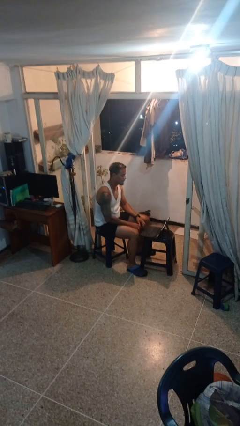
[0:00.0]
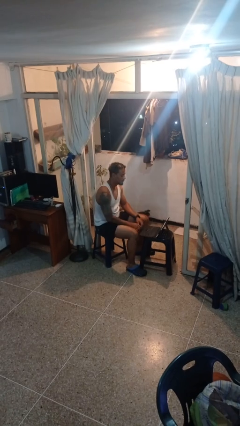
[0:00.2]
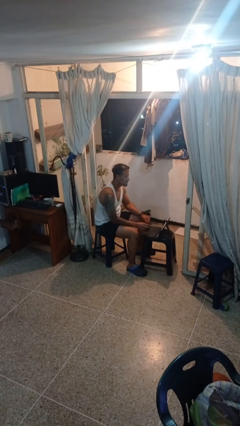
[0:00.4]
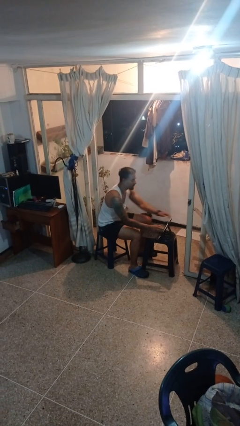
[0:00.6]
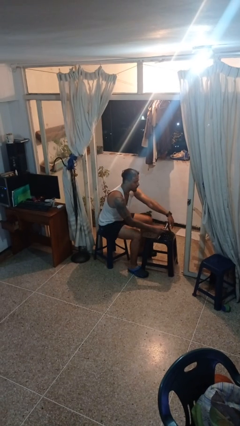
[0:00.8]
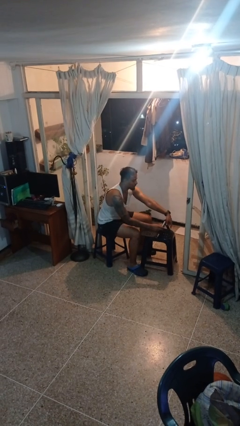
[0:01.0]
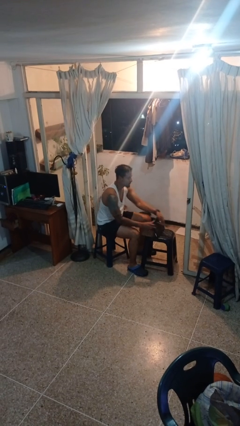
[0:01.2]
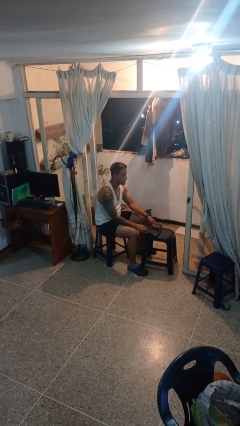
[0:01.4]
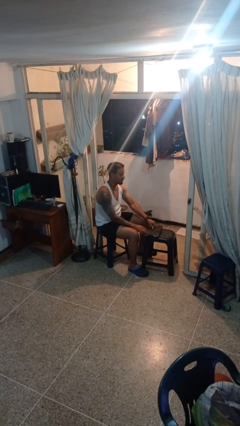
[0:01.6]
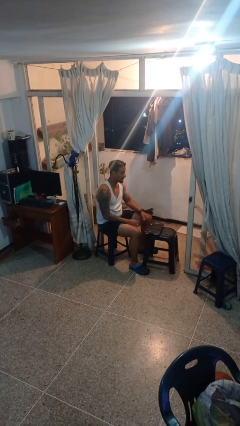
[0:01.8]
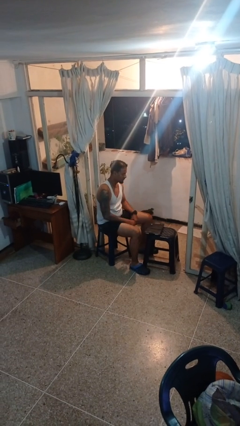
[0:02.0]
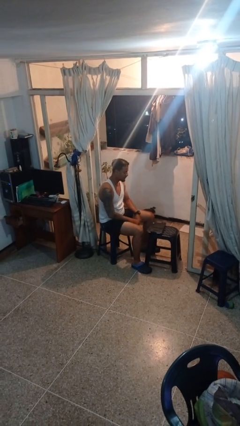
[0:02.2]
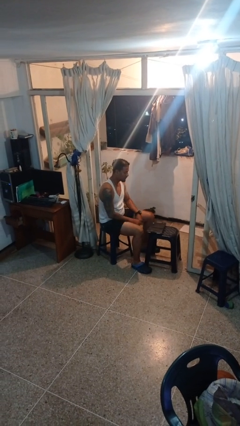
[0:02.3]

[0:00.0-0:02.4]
person closes laptop

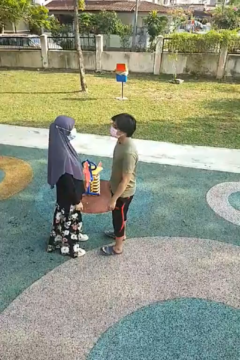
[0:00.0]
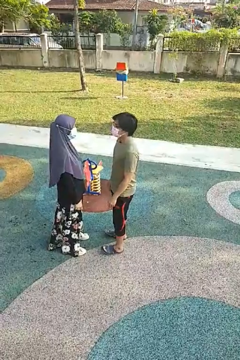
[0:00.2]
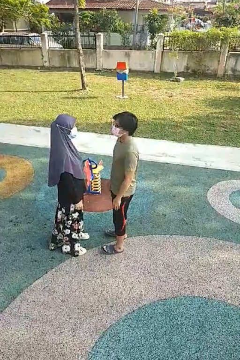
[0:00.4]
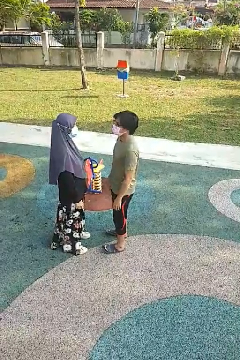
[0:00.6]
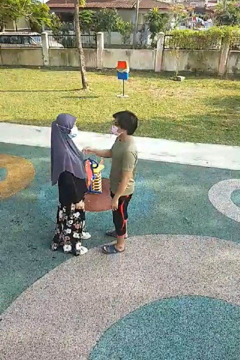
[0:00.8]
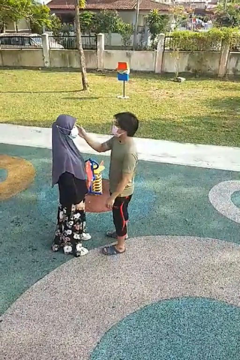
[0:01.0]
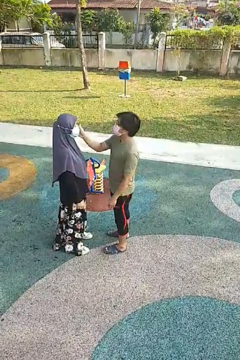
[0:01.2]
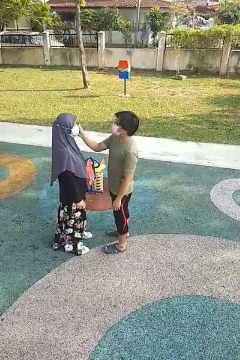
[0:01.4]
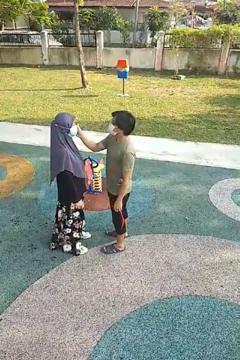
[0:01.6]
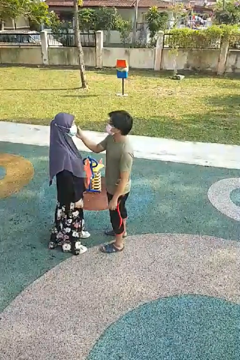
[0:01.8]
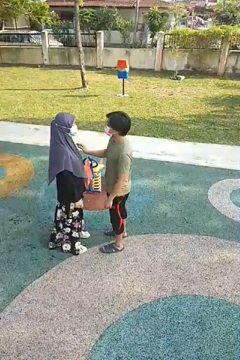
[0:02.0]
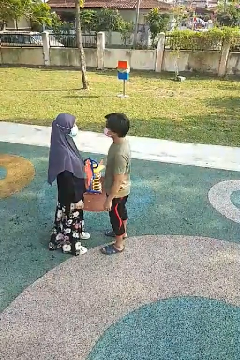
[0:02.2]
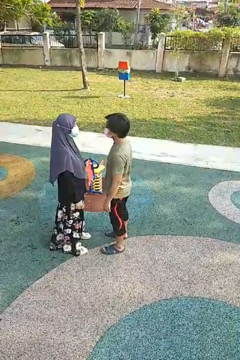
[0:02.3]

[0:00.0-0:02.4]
person touches face of person

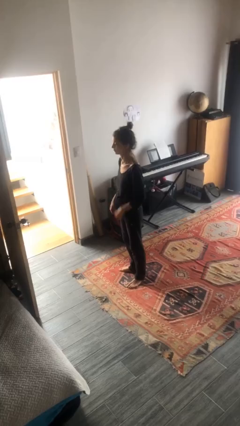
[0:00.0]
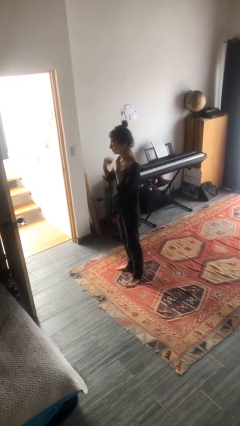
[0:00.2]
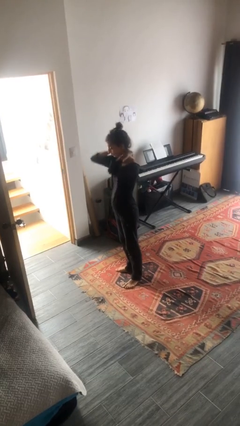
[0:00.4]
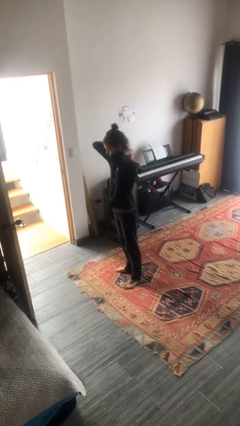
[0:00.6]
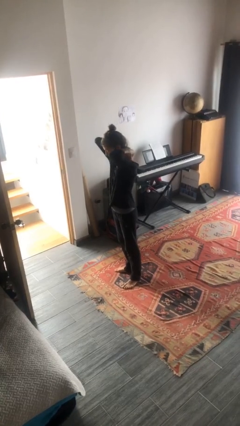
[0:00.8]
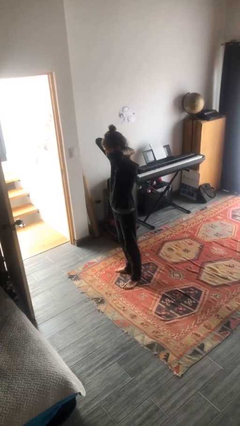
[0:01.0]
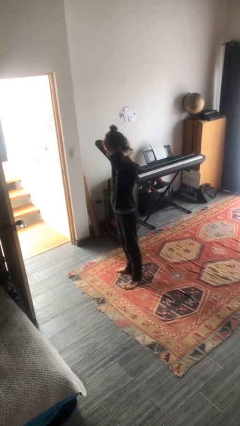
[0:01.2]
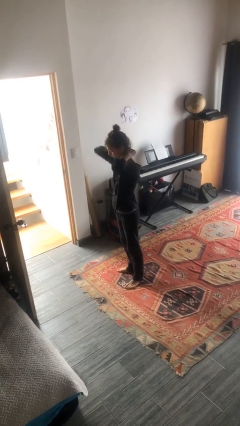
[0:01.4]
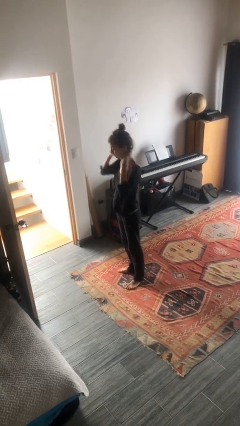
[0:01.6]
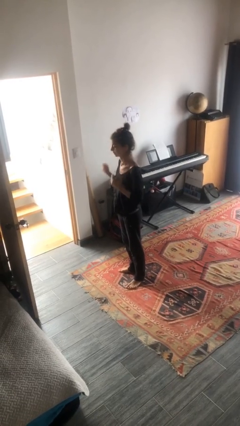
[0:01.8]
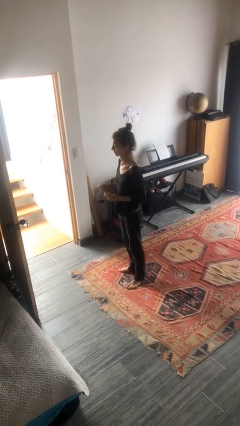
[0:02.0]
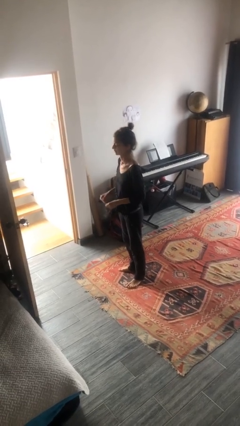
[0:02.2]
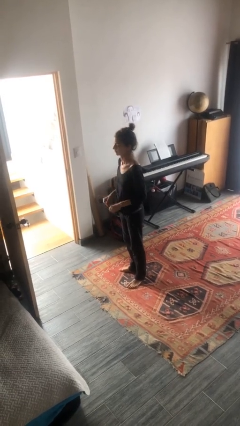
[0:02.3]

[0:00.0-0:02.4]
person takes off necklace

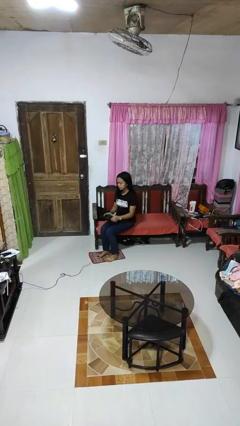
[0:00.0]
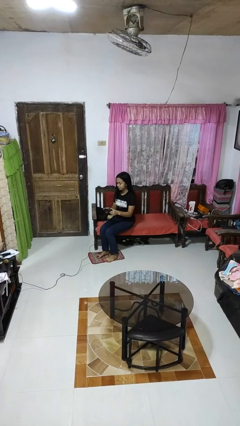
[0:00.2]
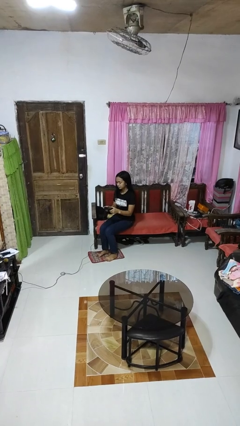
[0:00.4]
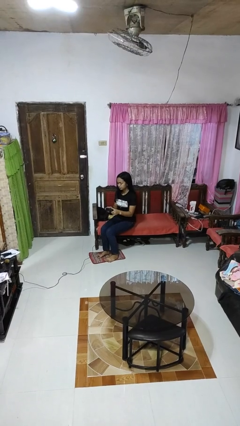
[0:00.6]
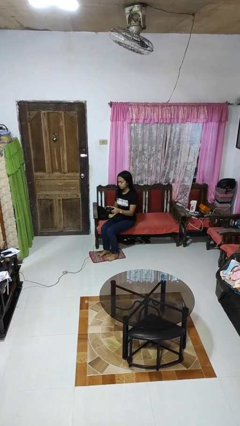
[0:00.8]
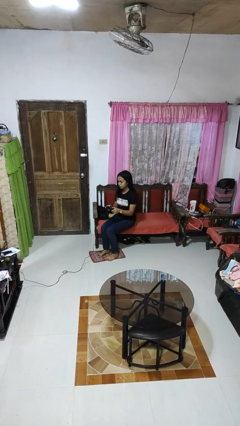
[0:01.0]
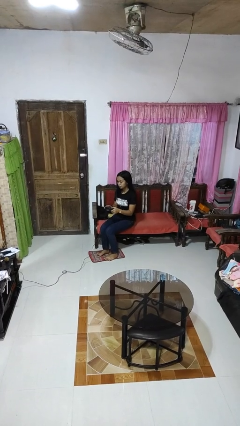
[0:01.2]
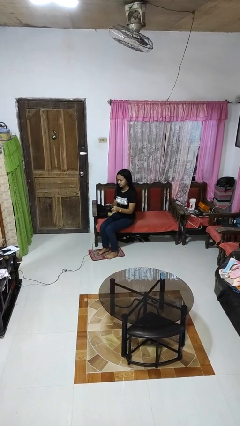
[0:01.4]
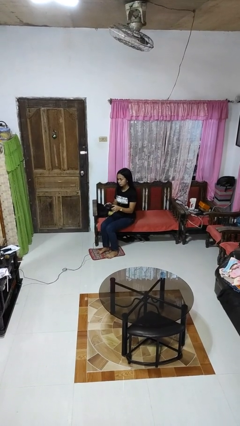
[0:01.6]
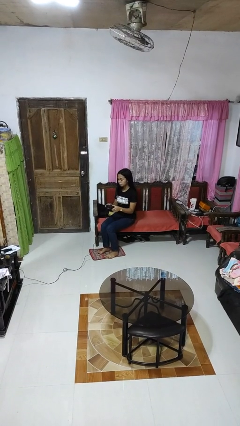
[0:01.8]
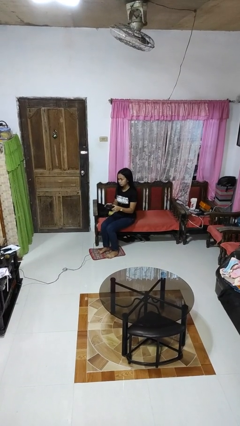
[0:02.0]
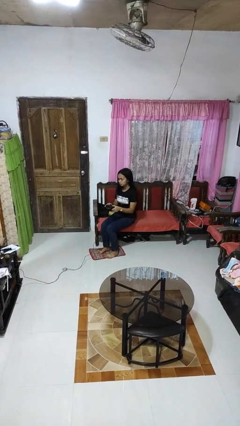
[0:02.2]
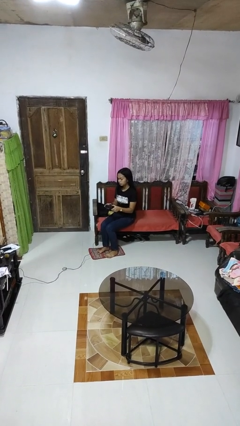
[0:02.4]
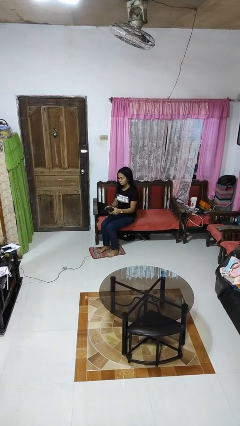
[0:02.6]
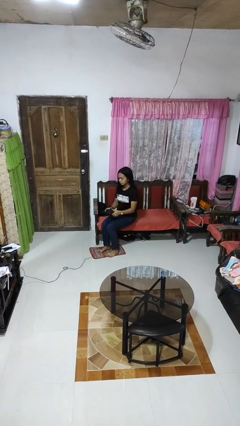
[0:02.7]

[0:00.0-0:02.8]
person interacts with handheld game

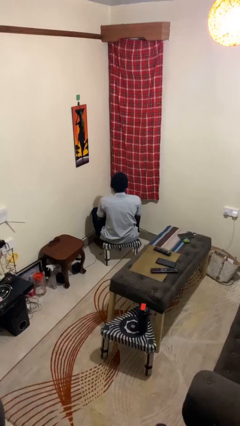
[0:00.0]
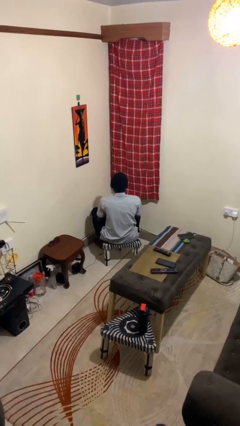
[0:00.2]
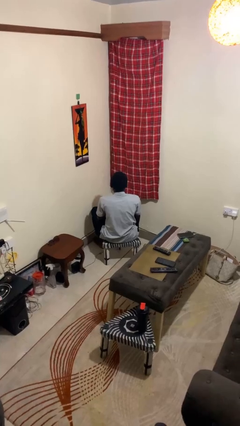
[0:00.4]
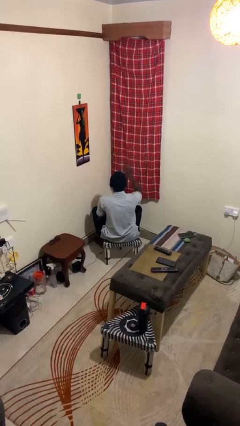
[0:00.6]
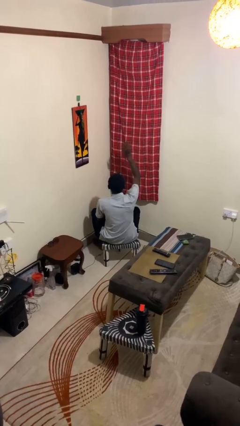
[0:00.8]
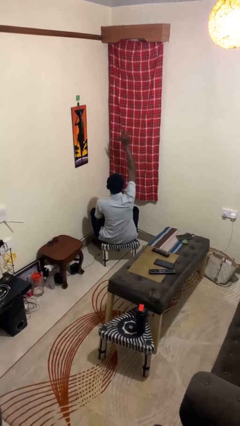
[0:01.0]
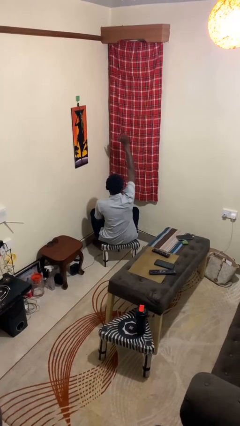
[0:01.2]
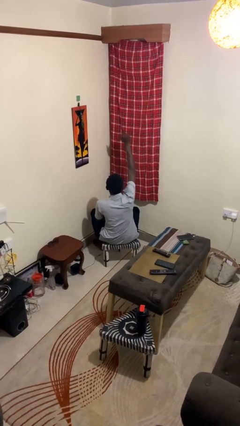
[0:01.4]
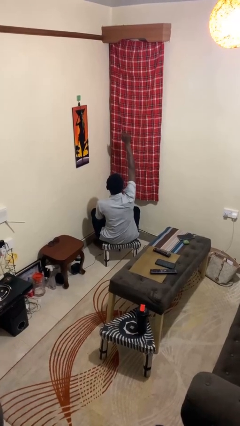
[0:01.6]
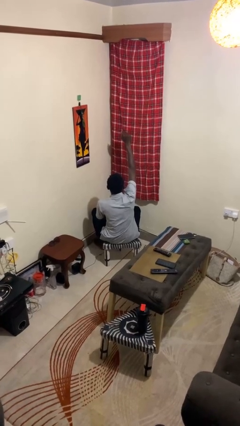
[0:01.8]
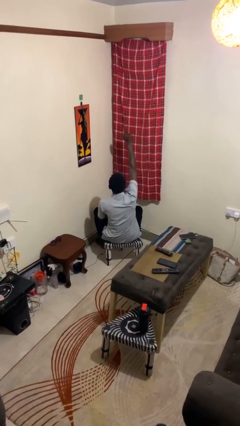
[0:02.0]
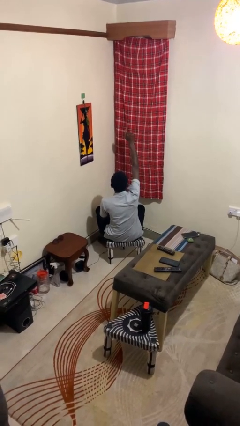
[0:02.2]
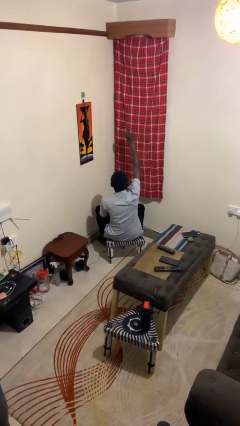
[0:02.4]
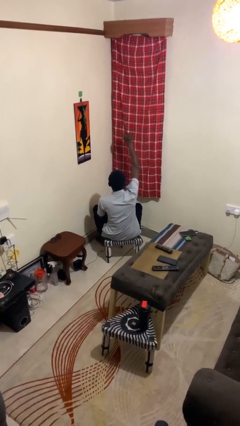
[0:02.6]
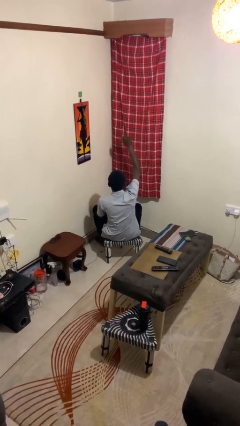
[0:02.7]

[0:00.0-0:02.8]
person gestures come here

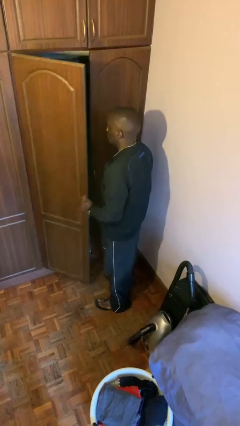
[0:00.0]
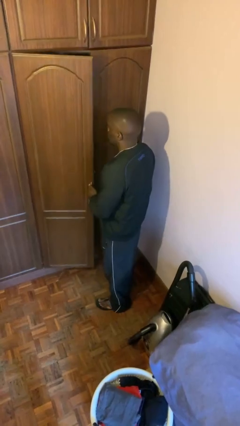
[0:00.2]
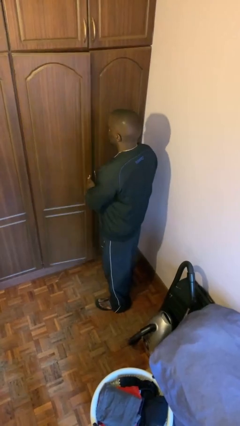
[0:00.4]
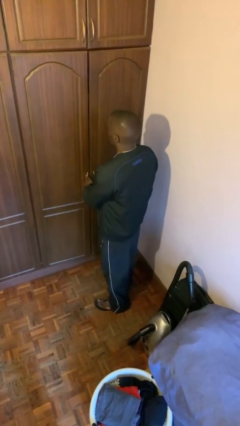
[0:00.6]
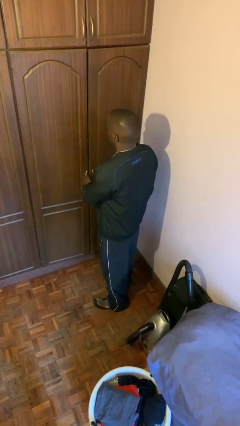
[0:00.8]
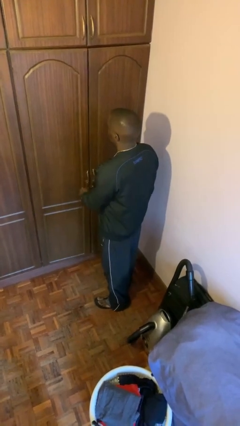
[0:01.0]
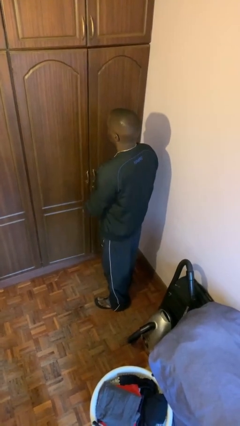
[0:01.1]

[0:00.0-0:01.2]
person closes closet door

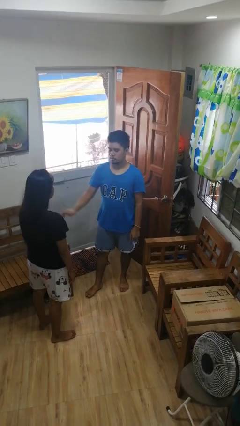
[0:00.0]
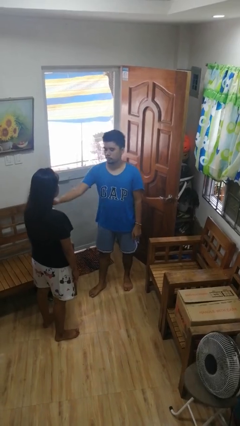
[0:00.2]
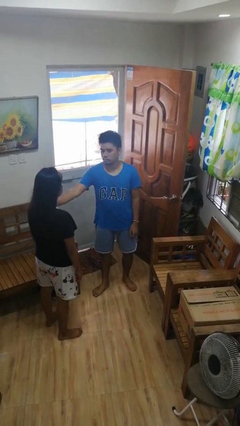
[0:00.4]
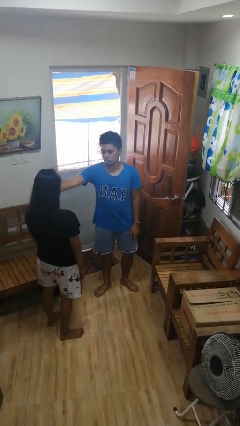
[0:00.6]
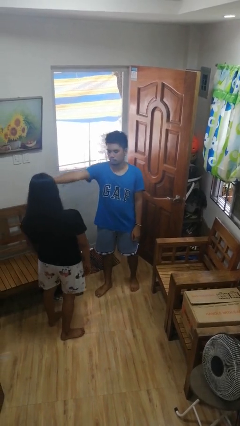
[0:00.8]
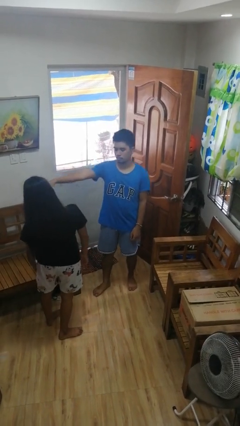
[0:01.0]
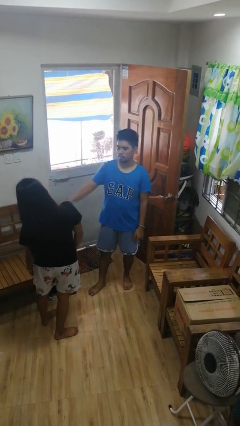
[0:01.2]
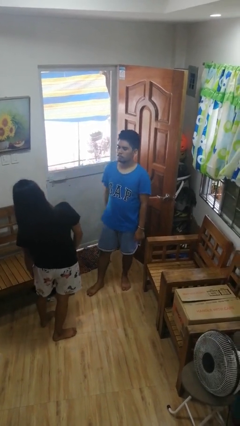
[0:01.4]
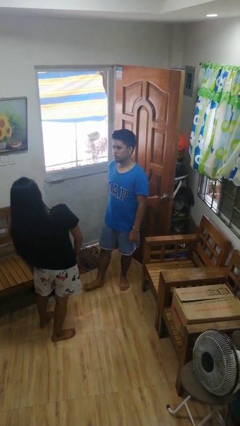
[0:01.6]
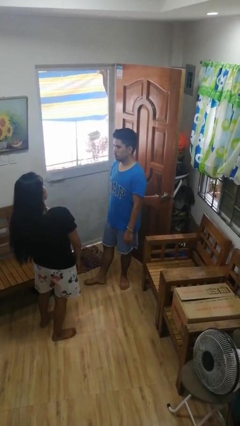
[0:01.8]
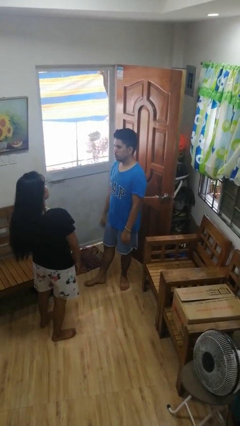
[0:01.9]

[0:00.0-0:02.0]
person shoves person

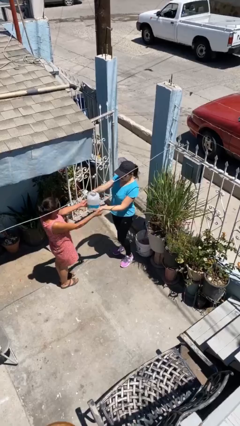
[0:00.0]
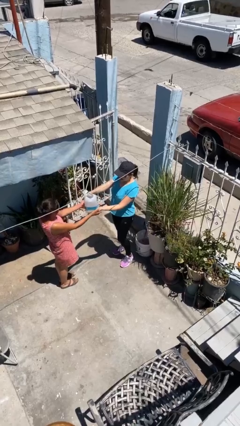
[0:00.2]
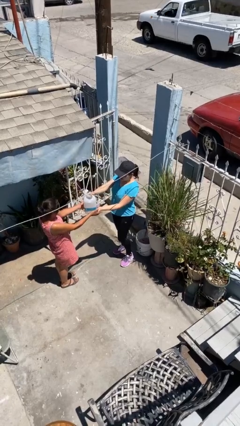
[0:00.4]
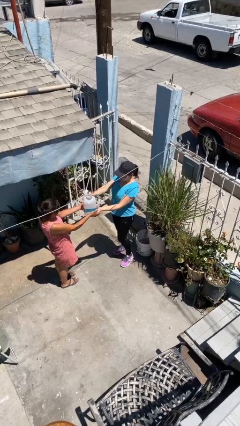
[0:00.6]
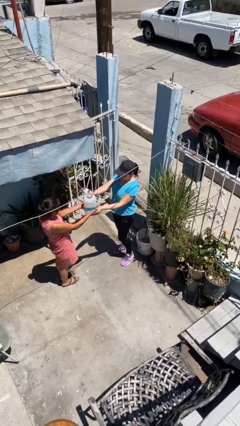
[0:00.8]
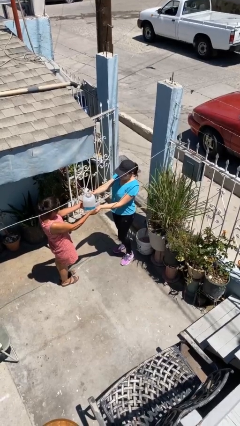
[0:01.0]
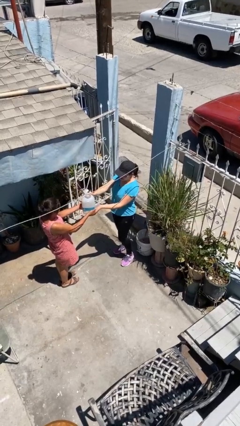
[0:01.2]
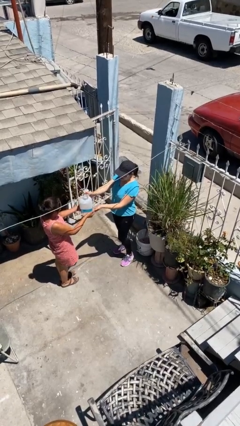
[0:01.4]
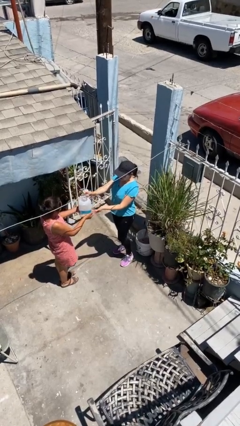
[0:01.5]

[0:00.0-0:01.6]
person transfers object to person
